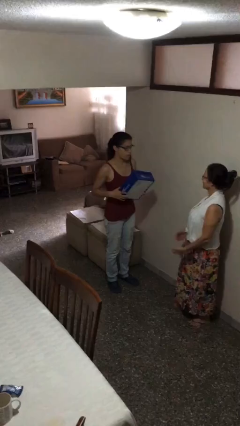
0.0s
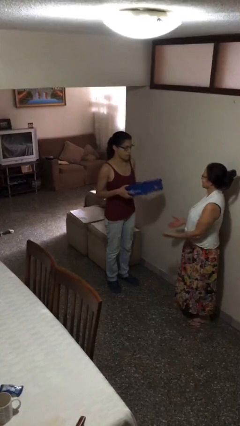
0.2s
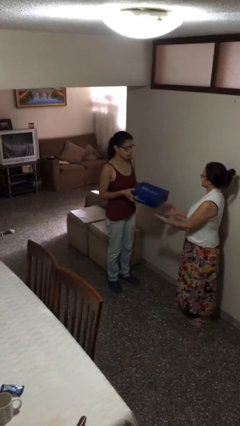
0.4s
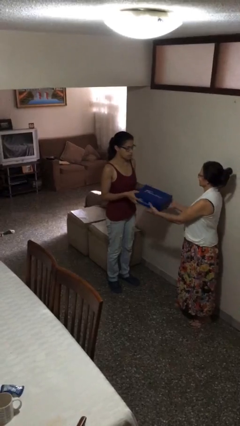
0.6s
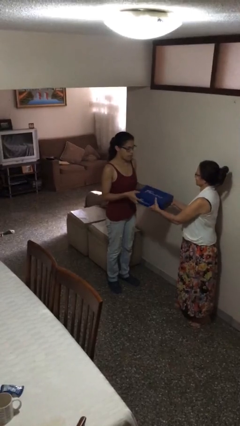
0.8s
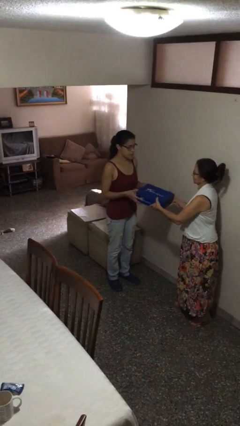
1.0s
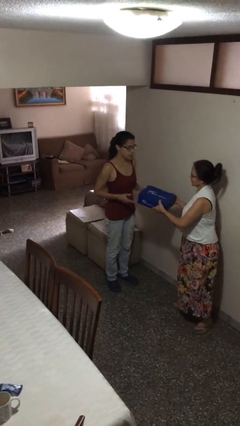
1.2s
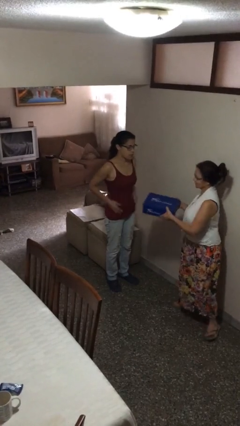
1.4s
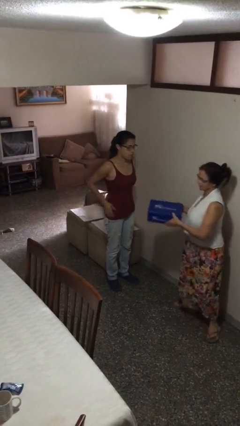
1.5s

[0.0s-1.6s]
person transfers object to person

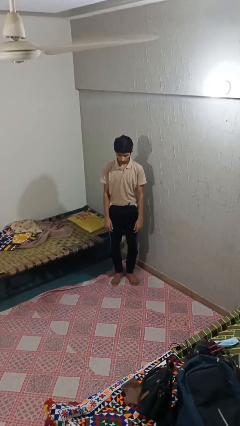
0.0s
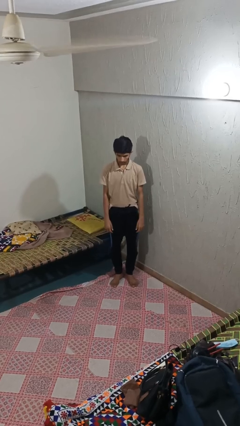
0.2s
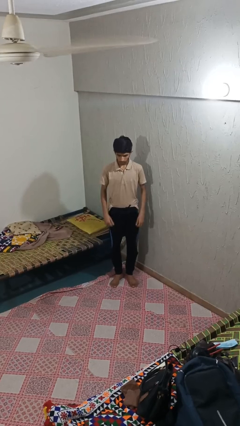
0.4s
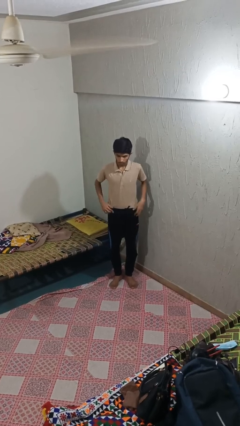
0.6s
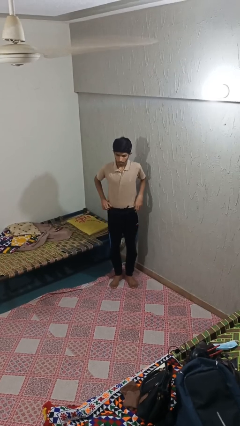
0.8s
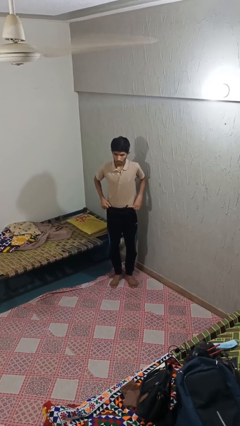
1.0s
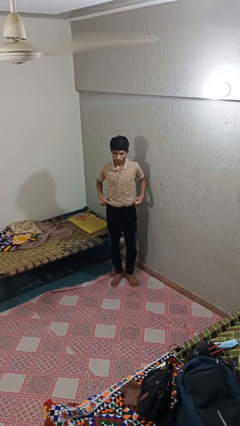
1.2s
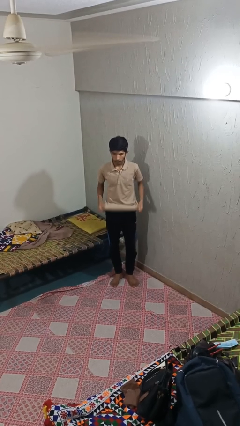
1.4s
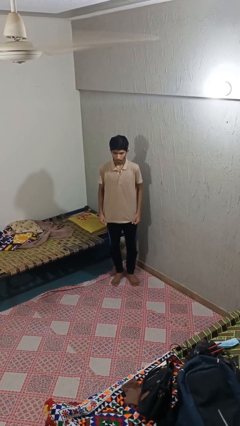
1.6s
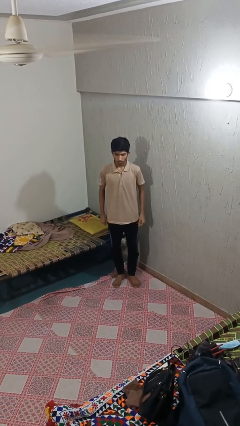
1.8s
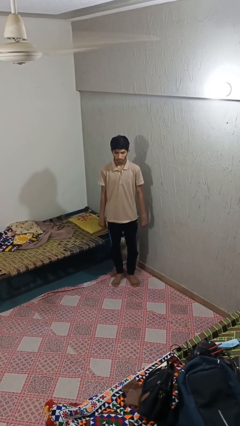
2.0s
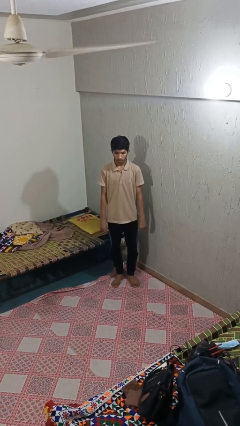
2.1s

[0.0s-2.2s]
person untucks shirt

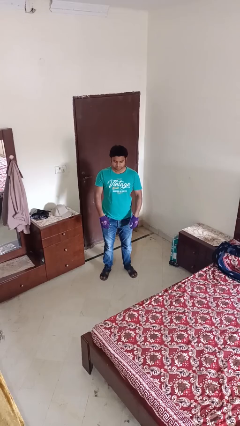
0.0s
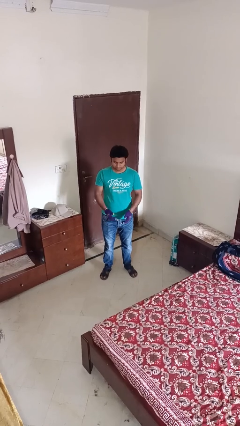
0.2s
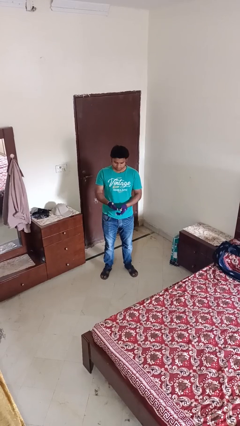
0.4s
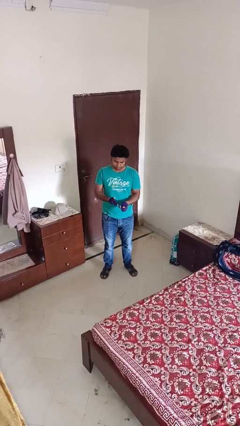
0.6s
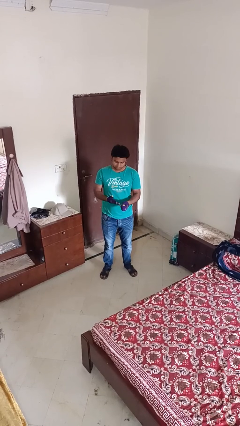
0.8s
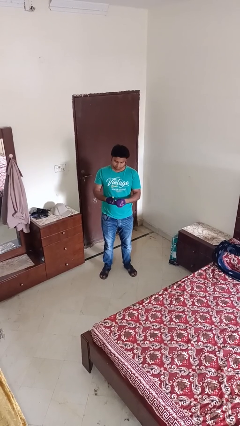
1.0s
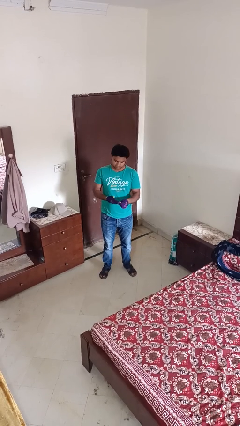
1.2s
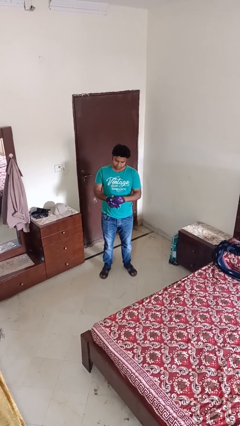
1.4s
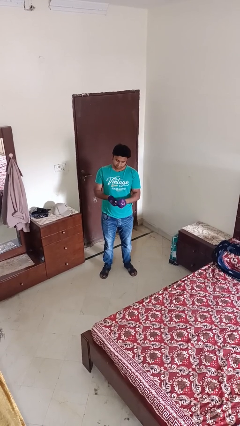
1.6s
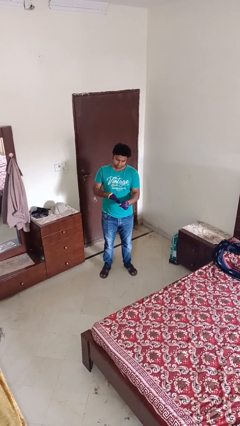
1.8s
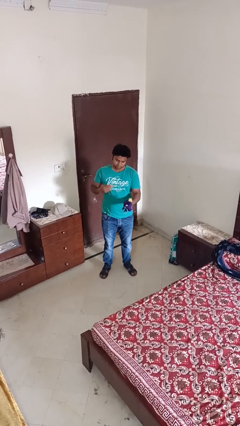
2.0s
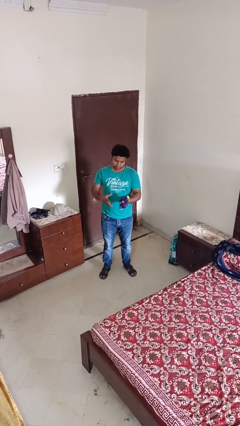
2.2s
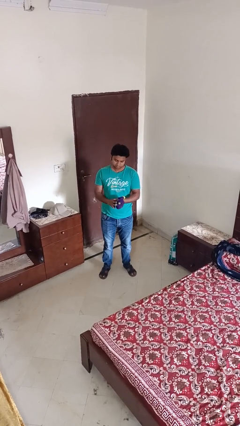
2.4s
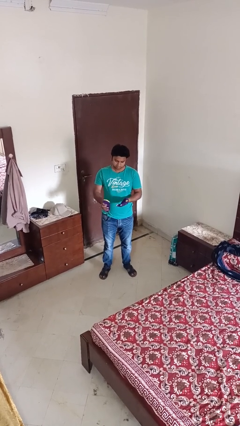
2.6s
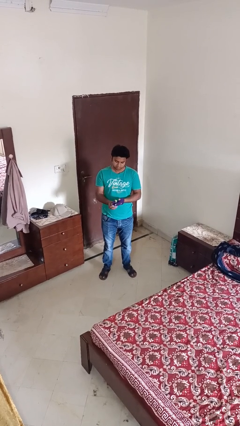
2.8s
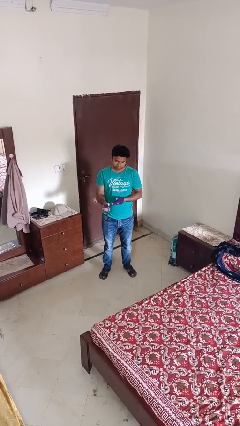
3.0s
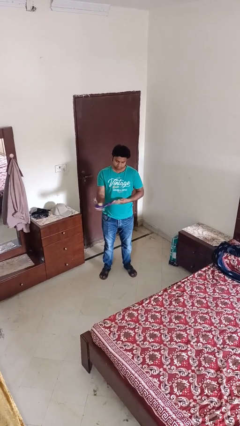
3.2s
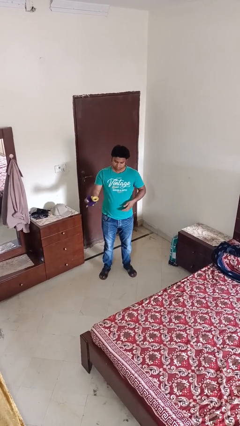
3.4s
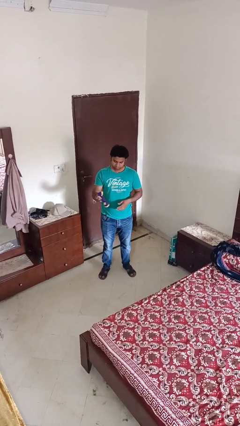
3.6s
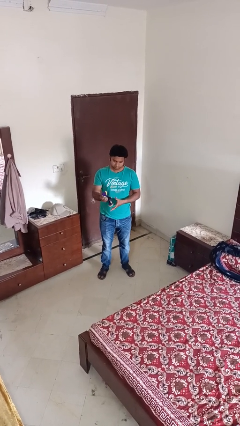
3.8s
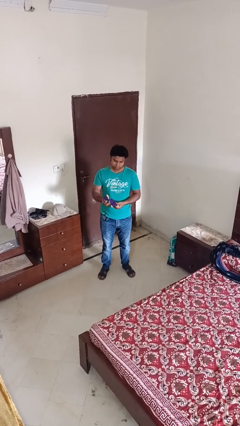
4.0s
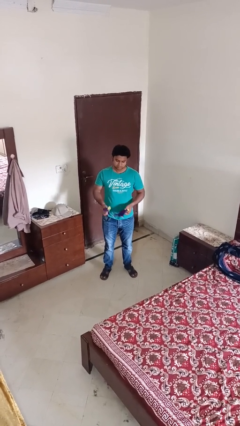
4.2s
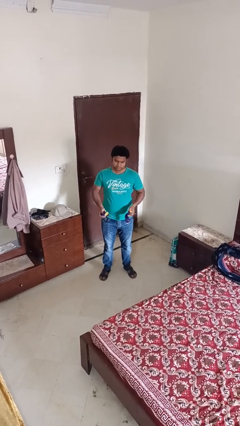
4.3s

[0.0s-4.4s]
person takes off gloves

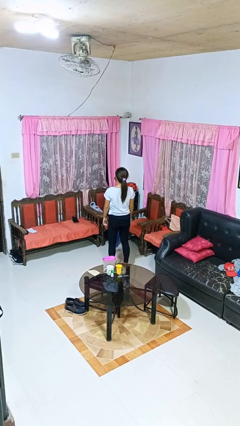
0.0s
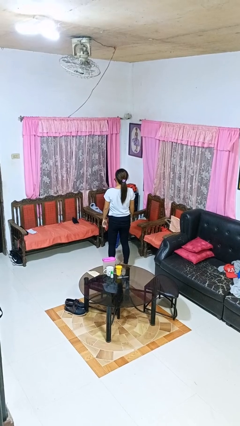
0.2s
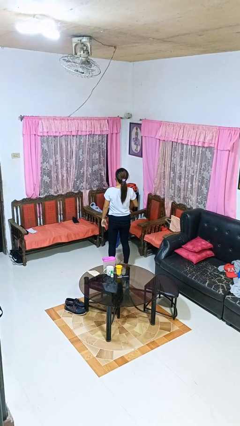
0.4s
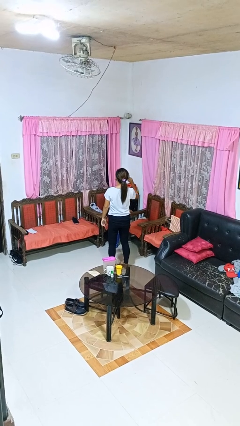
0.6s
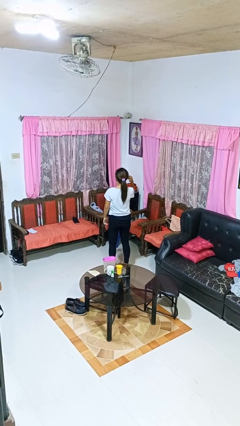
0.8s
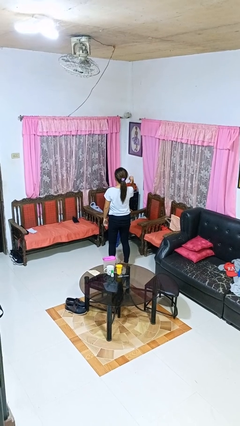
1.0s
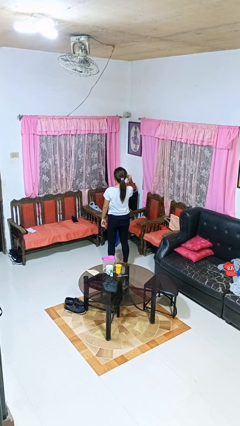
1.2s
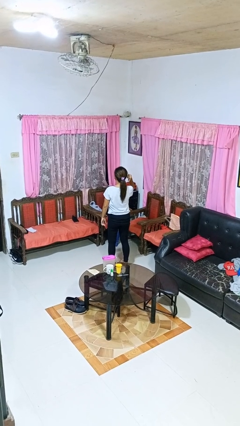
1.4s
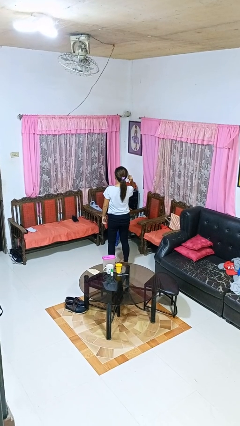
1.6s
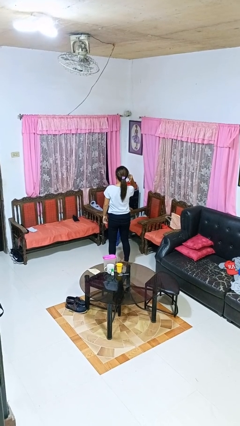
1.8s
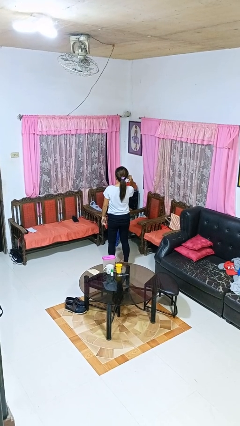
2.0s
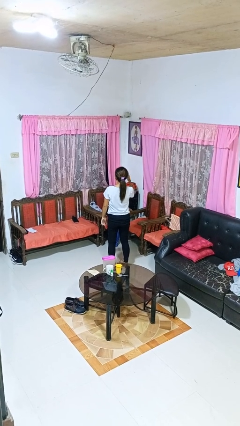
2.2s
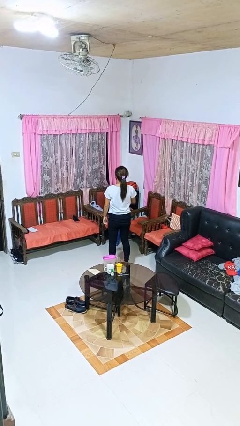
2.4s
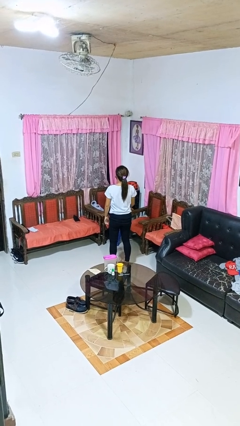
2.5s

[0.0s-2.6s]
person gestures behind me

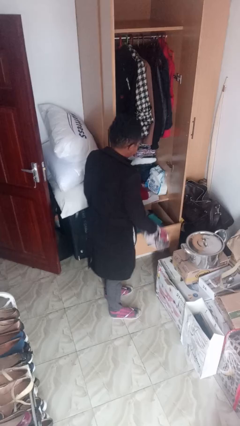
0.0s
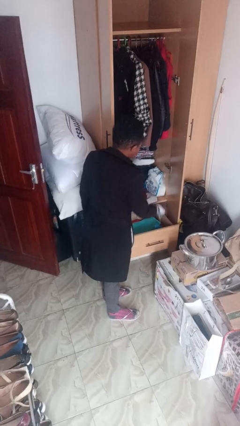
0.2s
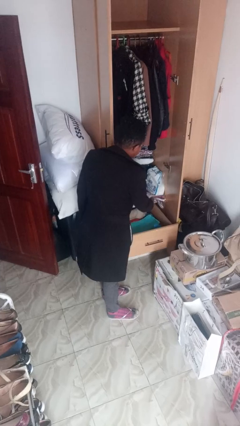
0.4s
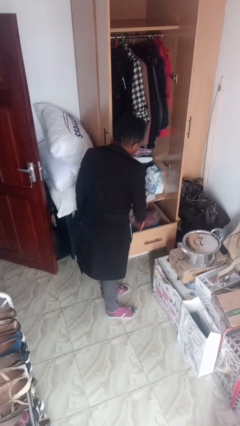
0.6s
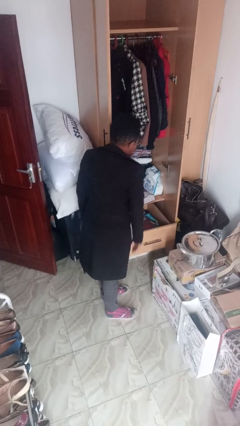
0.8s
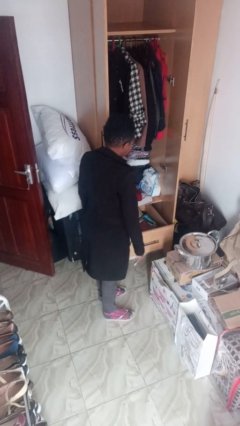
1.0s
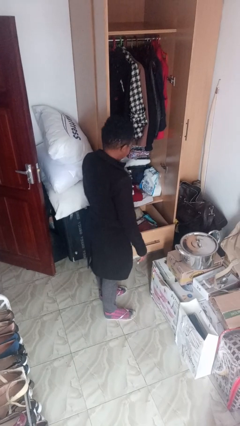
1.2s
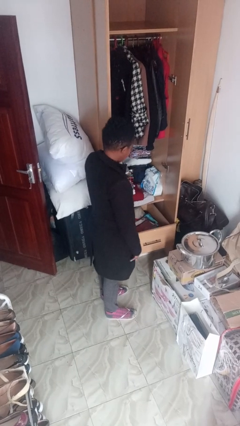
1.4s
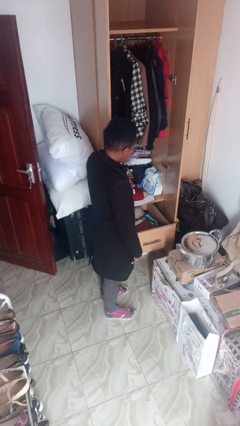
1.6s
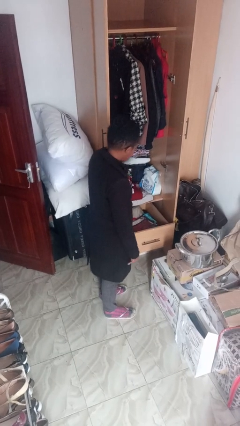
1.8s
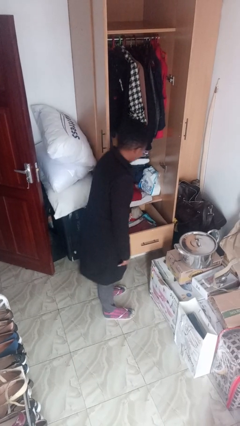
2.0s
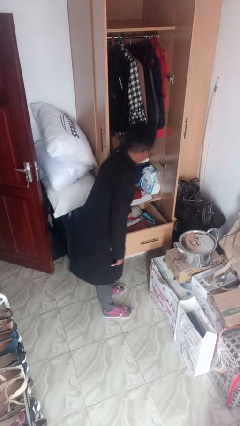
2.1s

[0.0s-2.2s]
person puts clothes into dresser

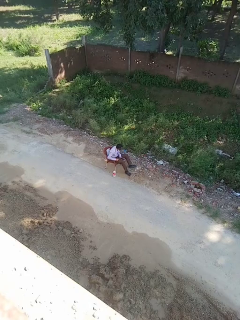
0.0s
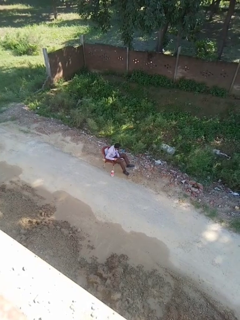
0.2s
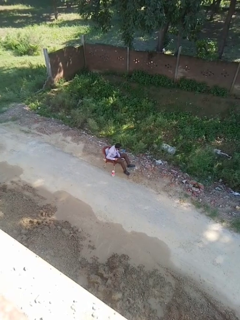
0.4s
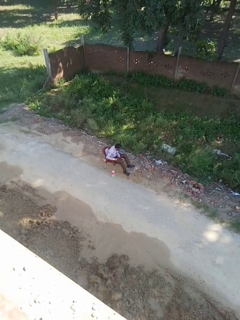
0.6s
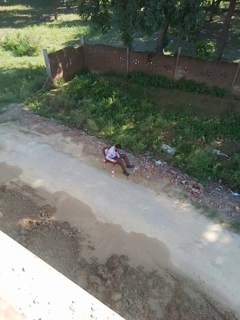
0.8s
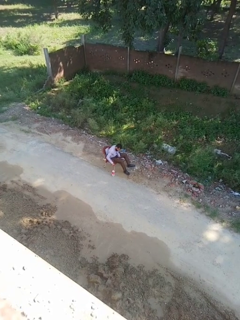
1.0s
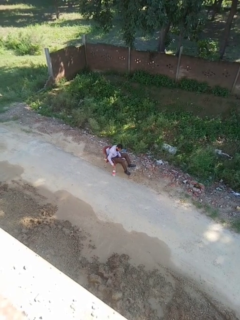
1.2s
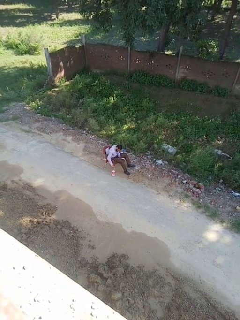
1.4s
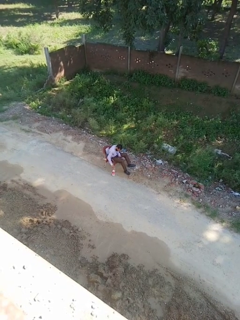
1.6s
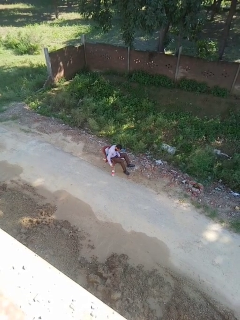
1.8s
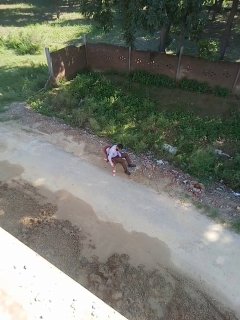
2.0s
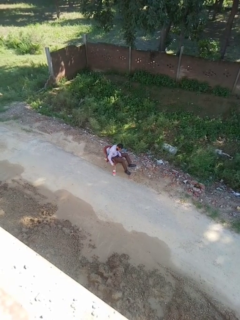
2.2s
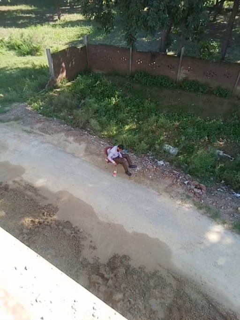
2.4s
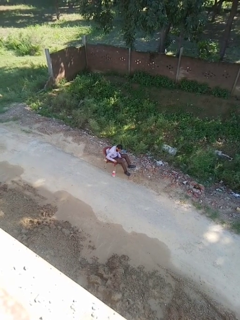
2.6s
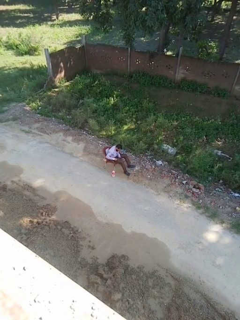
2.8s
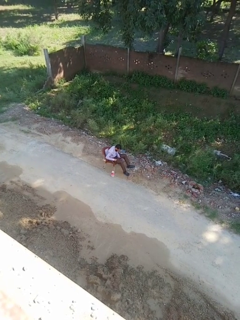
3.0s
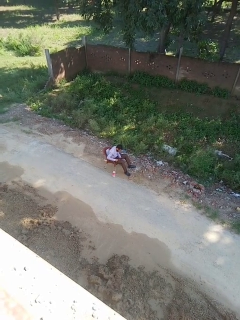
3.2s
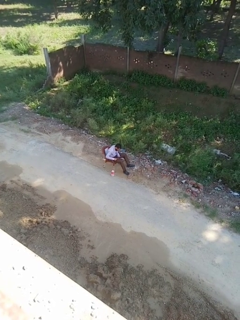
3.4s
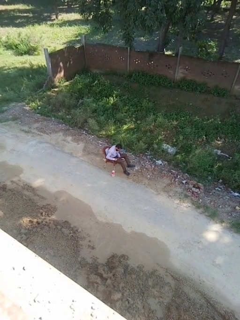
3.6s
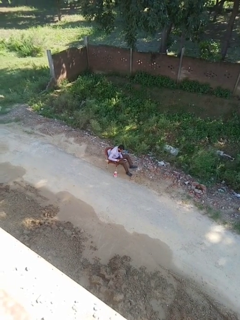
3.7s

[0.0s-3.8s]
person taps object with finger

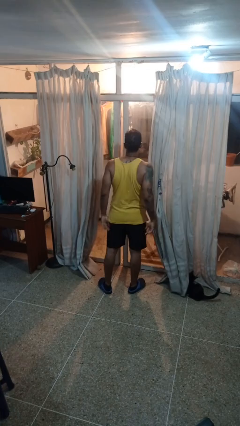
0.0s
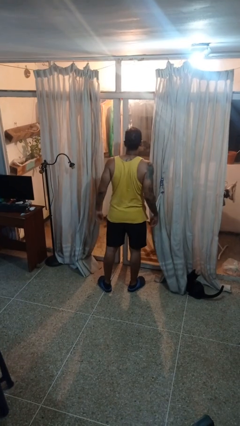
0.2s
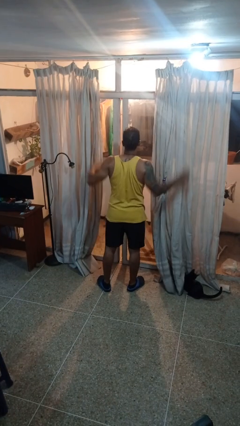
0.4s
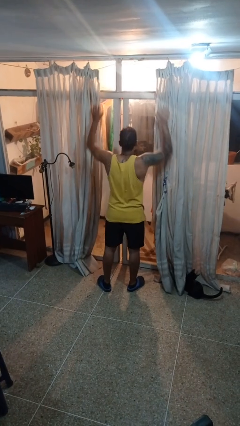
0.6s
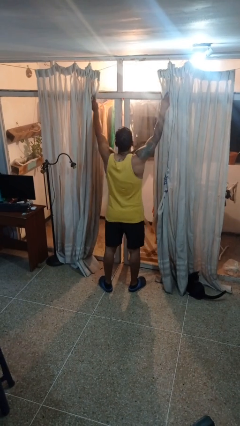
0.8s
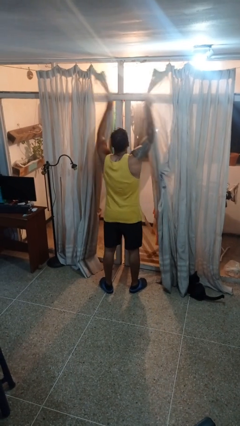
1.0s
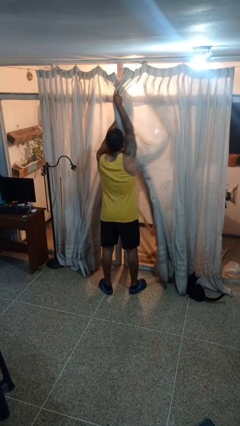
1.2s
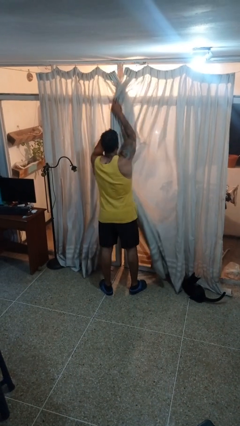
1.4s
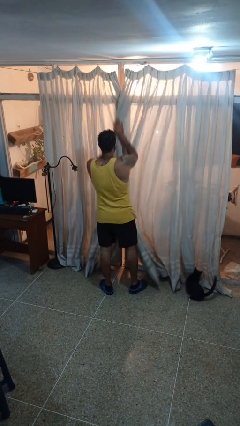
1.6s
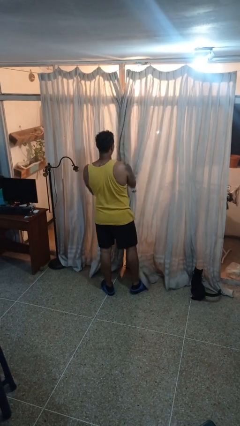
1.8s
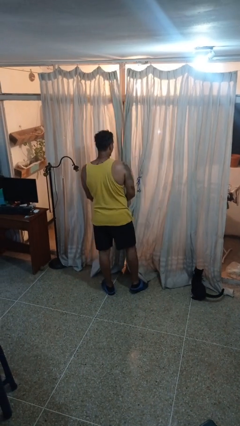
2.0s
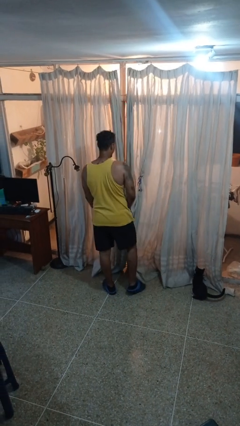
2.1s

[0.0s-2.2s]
person closes curtains
